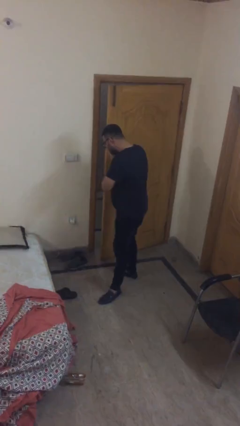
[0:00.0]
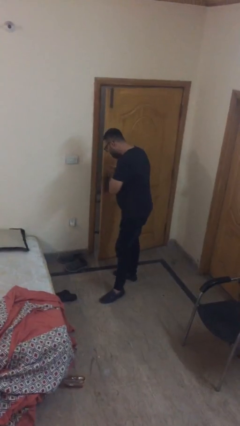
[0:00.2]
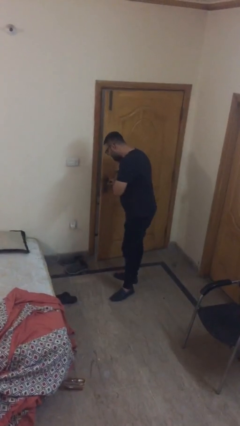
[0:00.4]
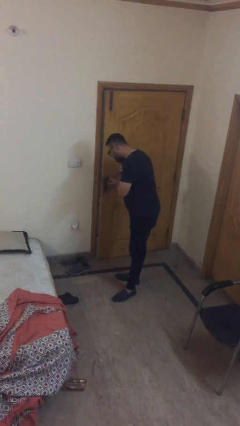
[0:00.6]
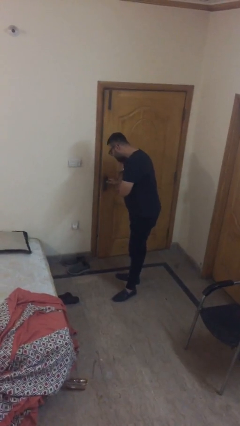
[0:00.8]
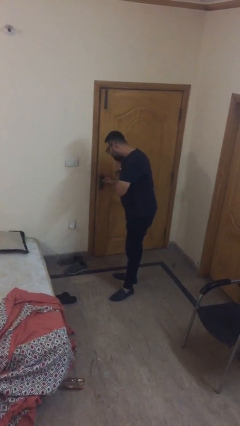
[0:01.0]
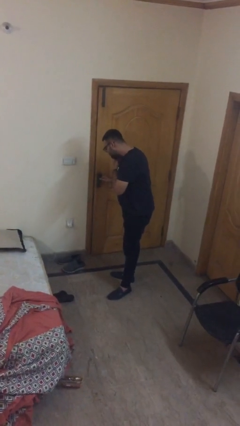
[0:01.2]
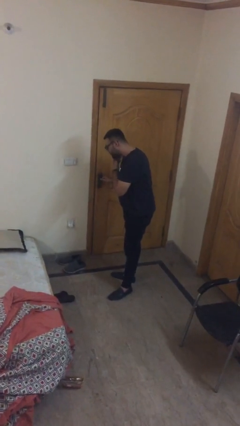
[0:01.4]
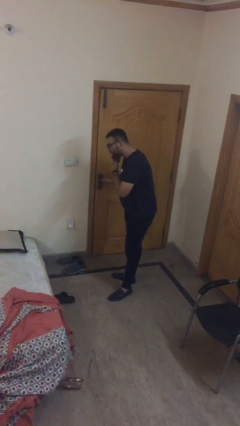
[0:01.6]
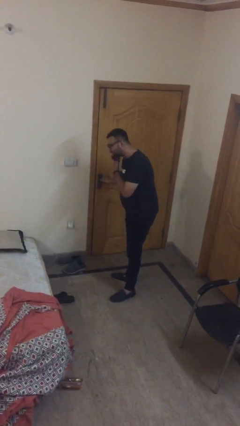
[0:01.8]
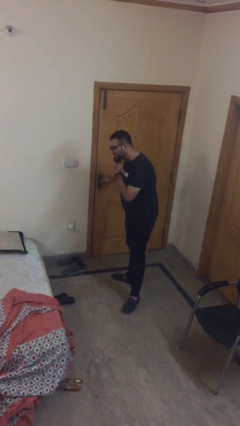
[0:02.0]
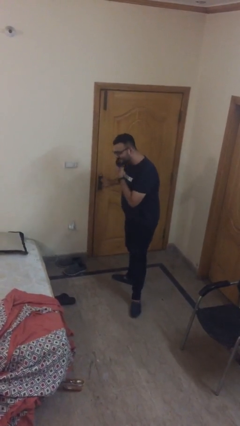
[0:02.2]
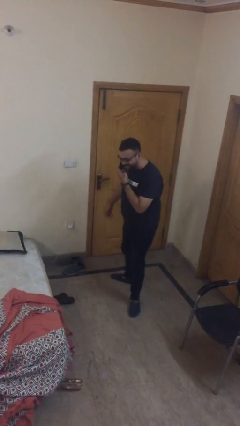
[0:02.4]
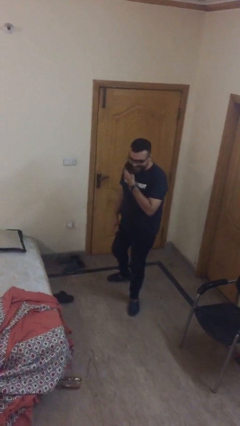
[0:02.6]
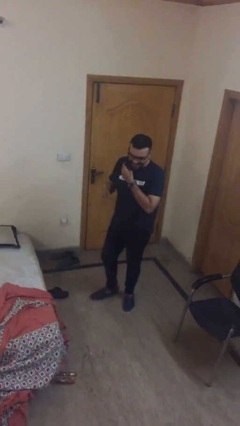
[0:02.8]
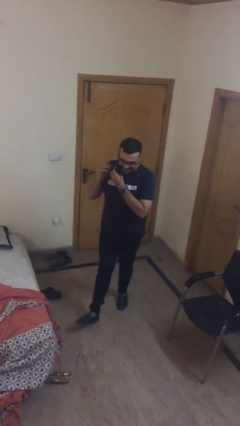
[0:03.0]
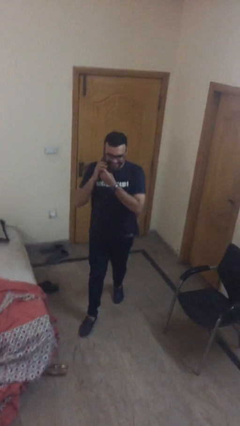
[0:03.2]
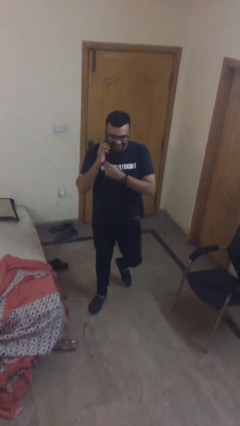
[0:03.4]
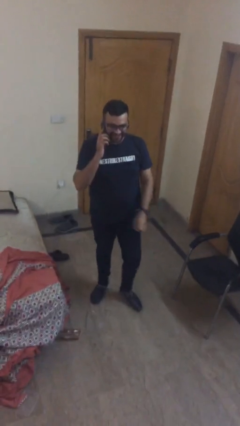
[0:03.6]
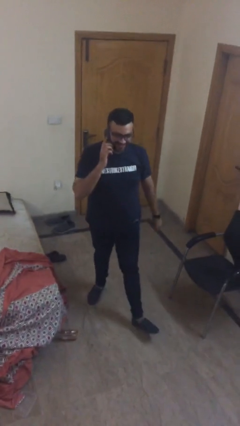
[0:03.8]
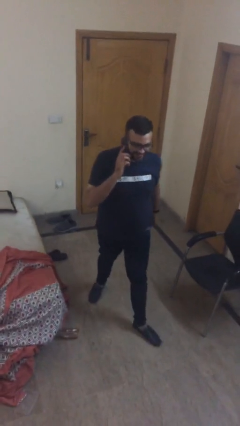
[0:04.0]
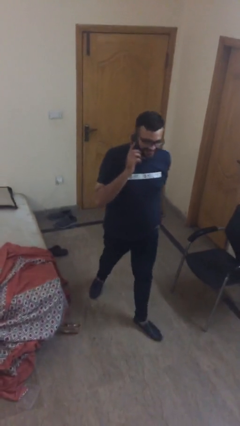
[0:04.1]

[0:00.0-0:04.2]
person closes facility door

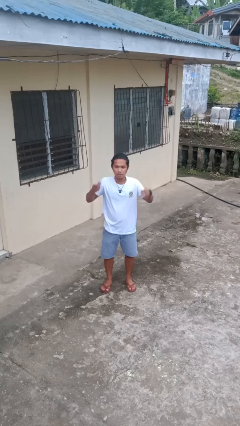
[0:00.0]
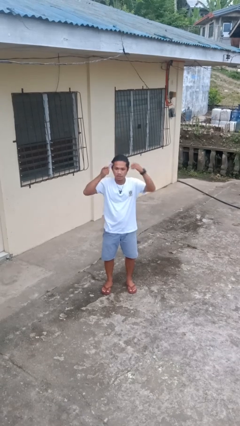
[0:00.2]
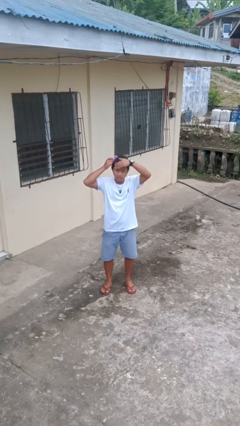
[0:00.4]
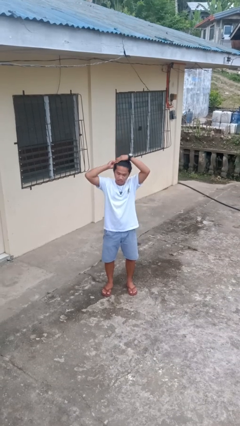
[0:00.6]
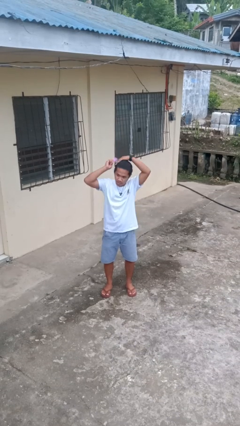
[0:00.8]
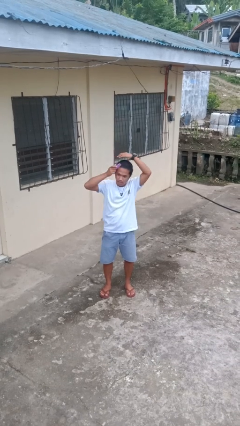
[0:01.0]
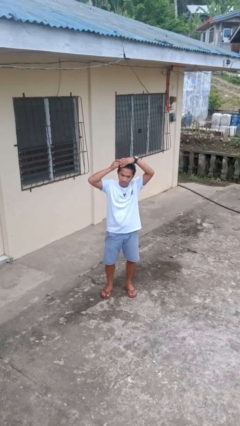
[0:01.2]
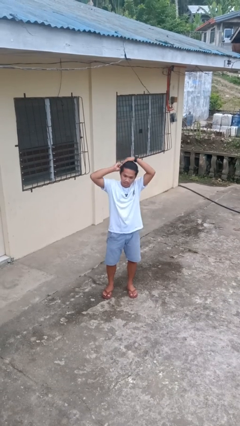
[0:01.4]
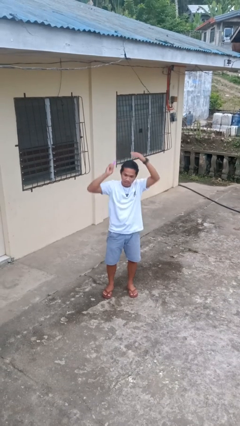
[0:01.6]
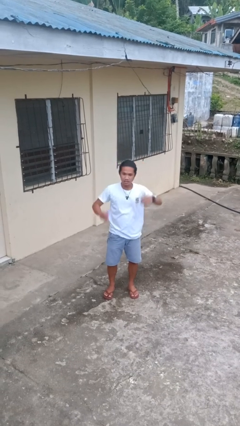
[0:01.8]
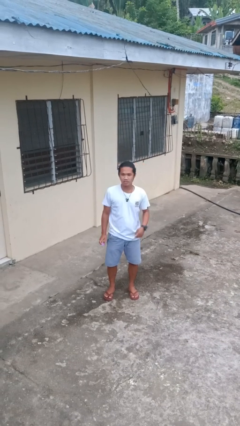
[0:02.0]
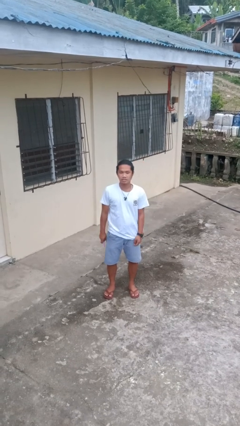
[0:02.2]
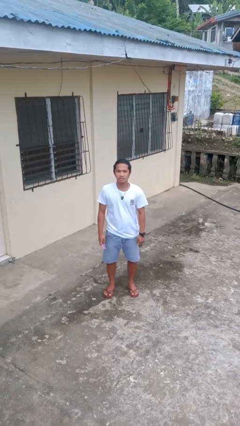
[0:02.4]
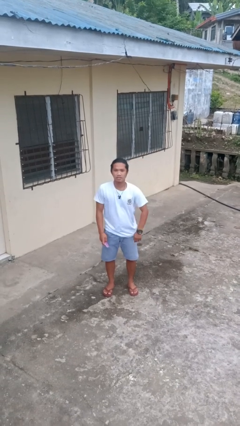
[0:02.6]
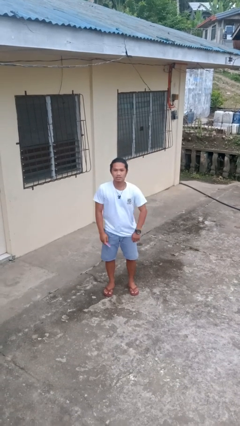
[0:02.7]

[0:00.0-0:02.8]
person brushes hair

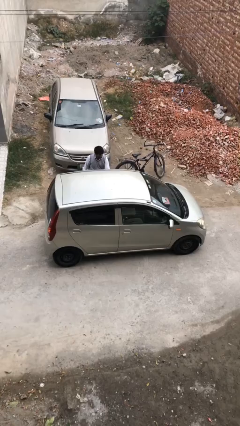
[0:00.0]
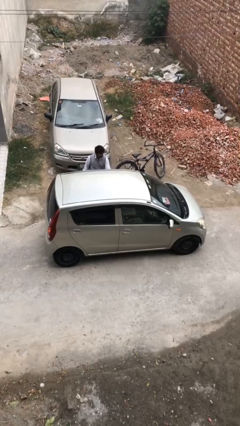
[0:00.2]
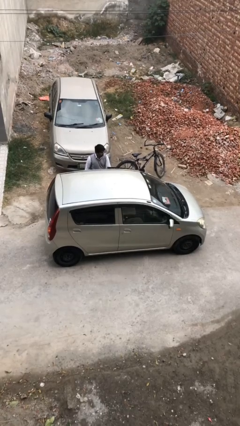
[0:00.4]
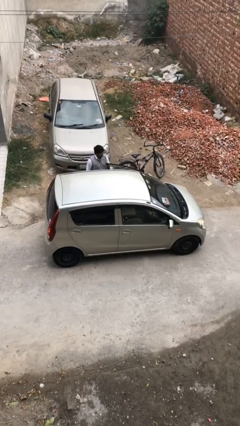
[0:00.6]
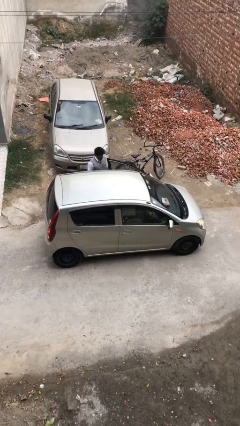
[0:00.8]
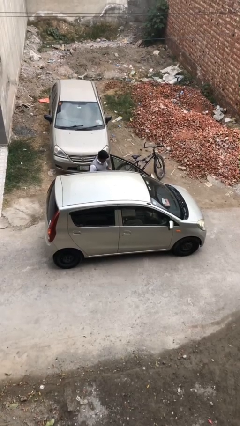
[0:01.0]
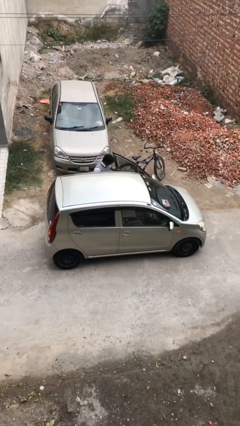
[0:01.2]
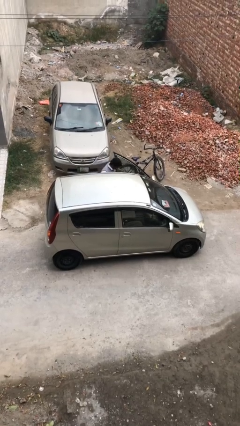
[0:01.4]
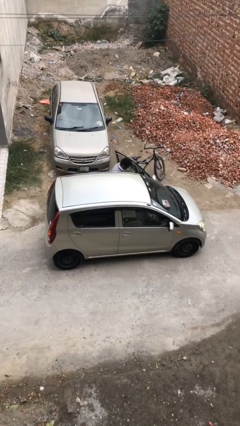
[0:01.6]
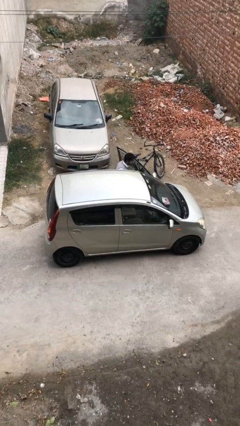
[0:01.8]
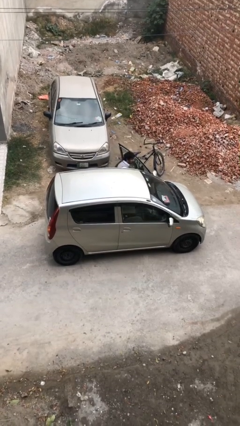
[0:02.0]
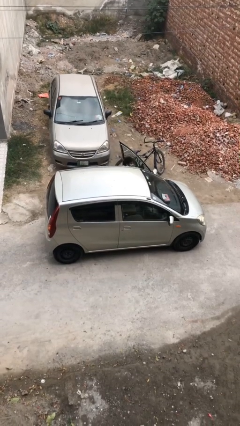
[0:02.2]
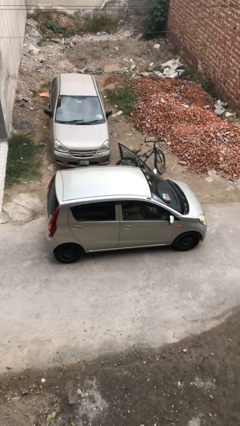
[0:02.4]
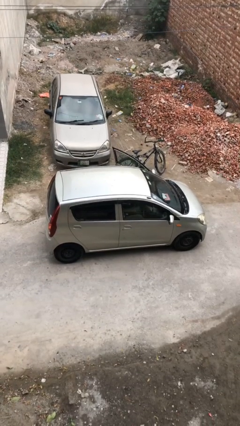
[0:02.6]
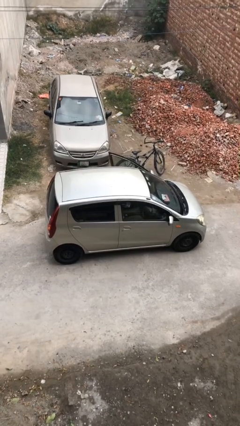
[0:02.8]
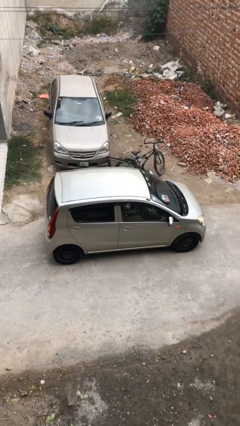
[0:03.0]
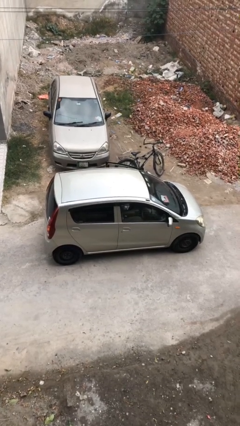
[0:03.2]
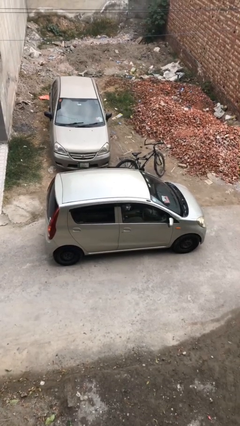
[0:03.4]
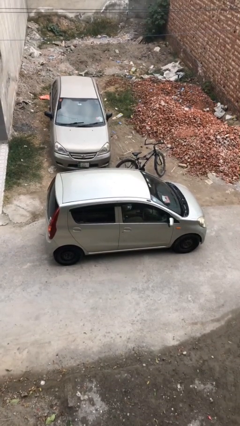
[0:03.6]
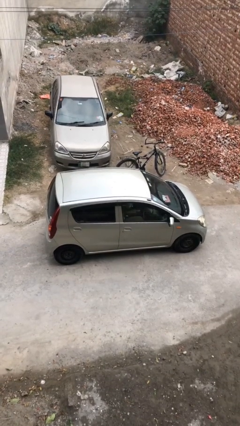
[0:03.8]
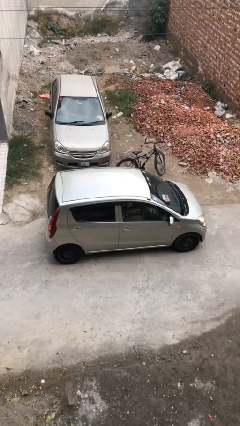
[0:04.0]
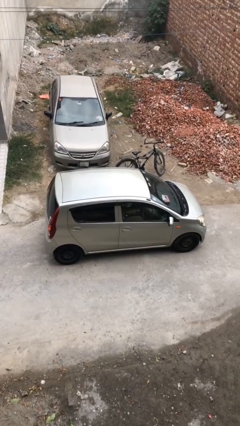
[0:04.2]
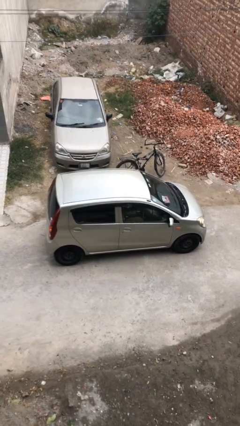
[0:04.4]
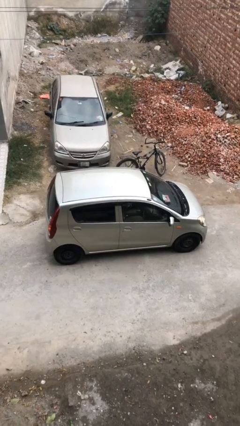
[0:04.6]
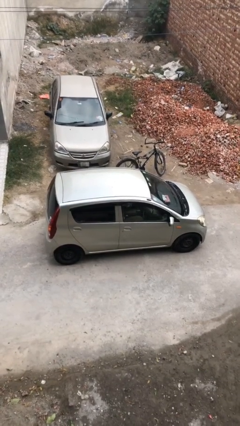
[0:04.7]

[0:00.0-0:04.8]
car picks up person

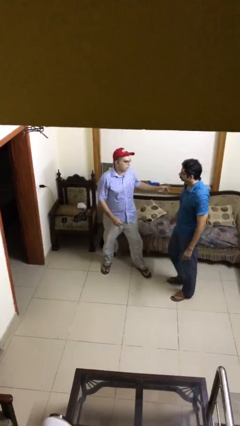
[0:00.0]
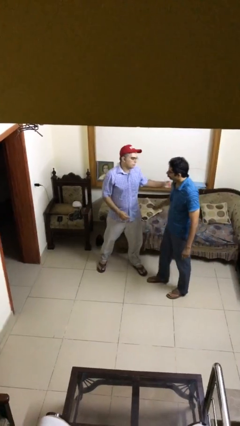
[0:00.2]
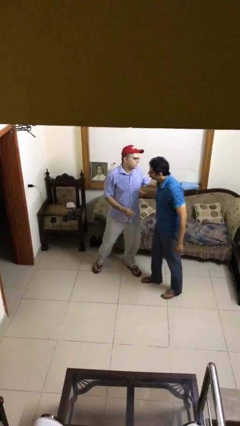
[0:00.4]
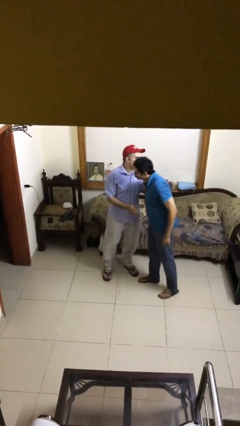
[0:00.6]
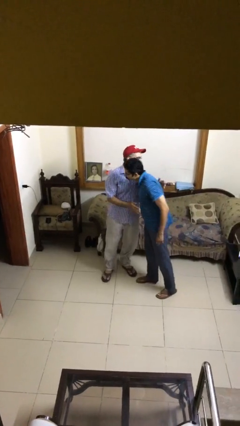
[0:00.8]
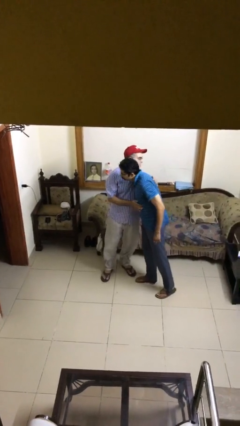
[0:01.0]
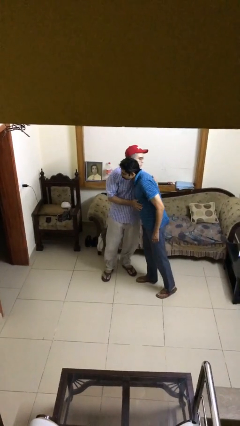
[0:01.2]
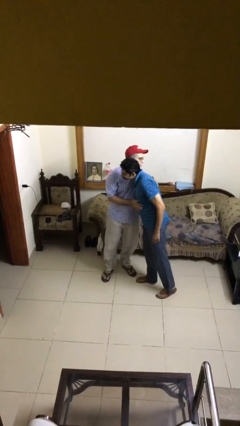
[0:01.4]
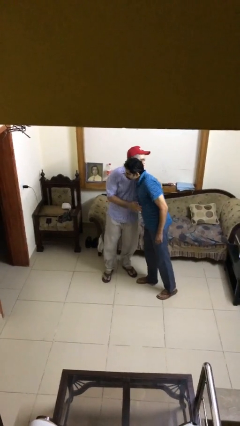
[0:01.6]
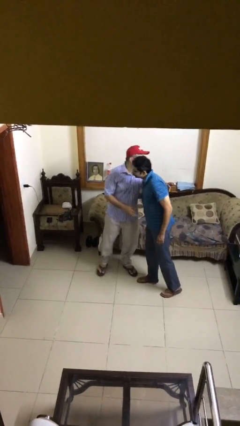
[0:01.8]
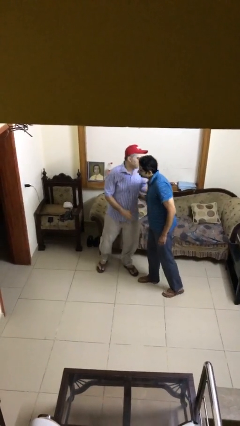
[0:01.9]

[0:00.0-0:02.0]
person embraces person

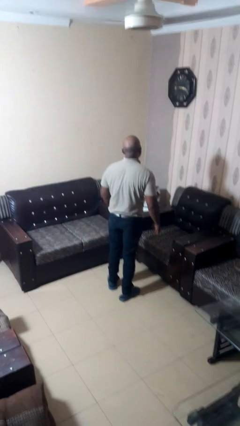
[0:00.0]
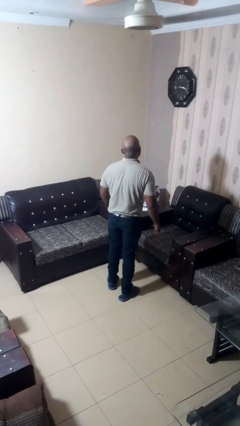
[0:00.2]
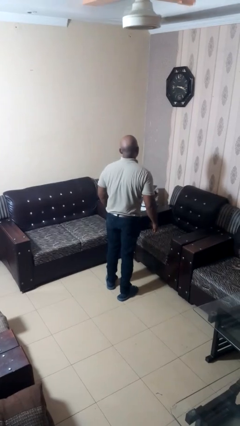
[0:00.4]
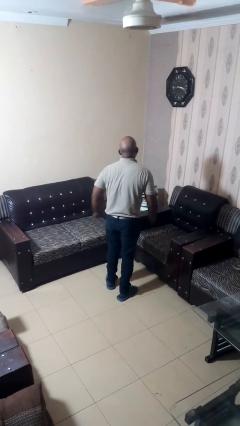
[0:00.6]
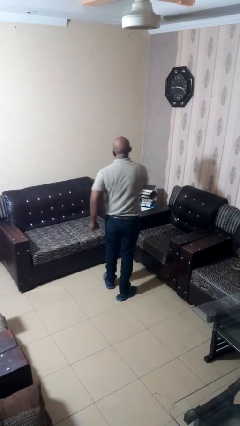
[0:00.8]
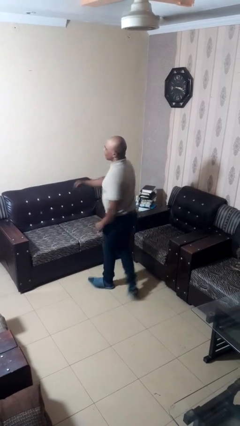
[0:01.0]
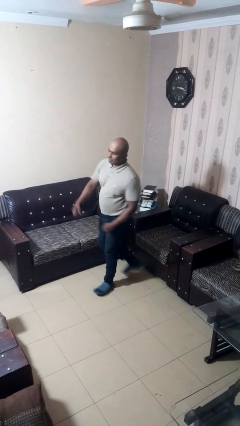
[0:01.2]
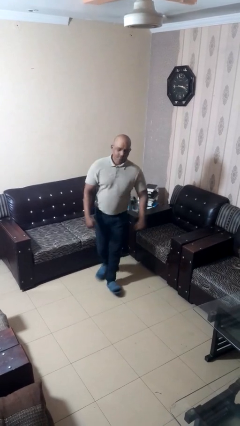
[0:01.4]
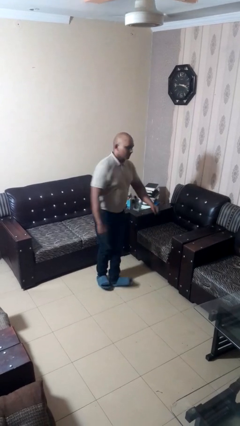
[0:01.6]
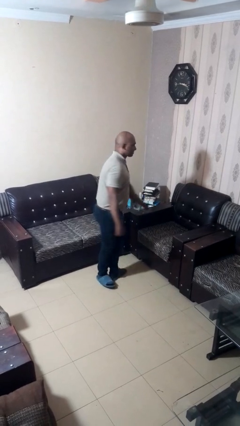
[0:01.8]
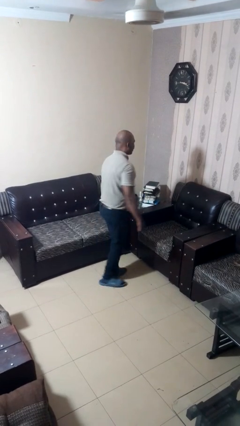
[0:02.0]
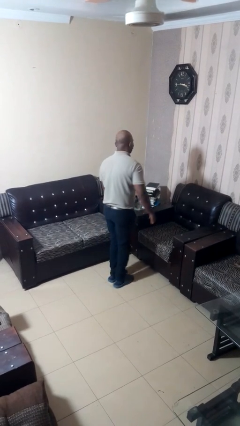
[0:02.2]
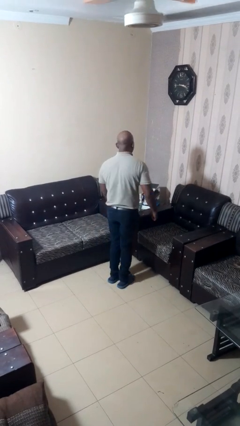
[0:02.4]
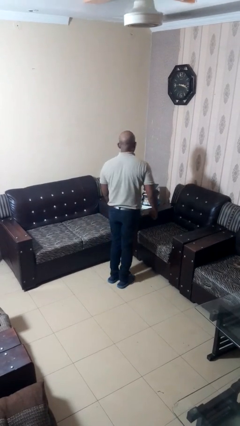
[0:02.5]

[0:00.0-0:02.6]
person twirls

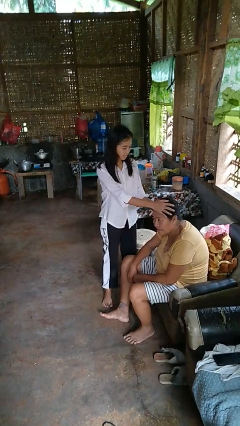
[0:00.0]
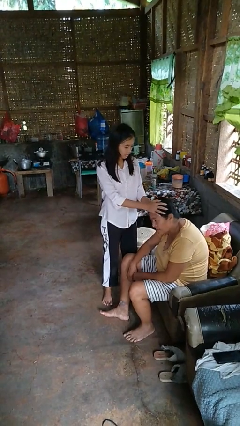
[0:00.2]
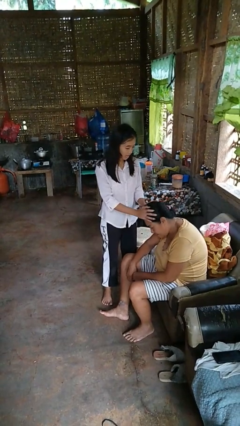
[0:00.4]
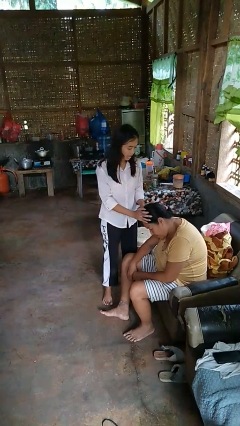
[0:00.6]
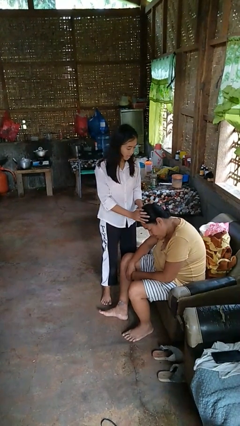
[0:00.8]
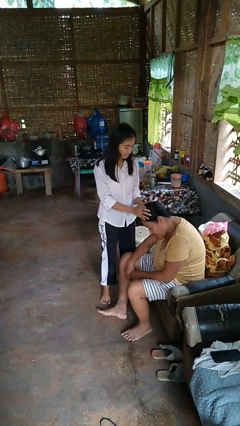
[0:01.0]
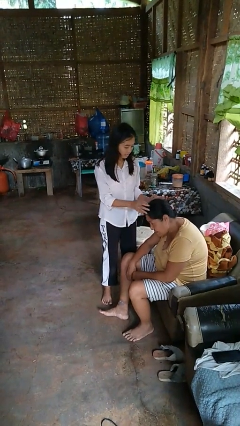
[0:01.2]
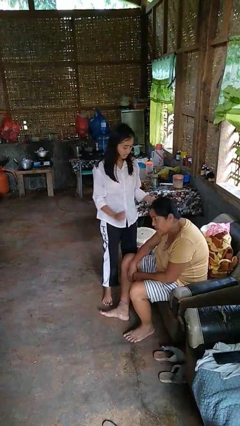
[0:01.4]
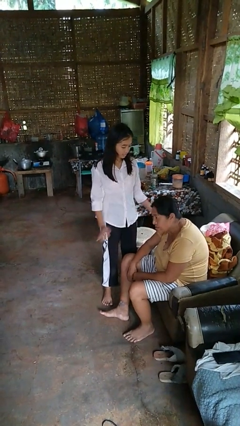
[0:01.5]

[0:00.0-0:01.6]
person grabs person by hair
